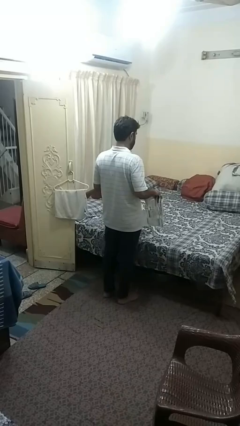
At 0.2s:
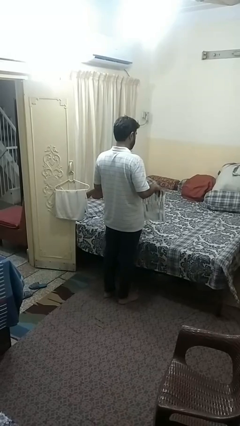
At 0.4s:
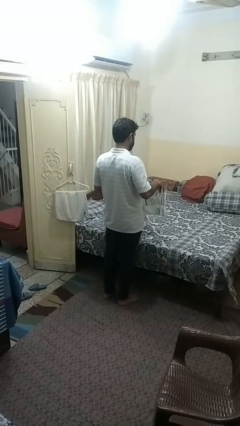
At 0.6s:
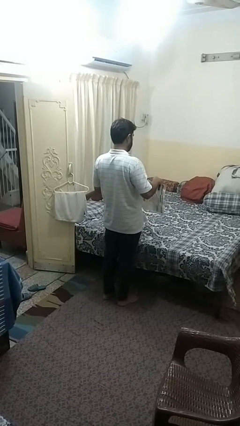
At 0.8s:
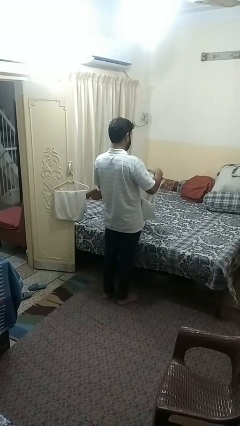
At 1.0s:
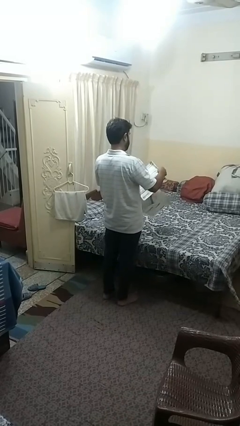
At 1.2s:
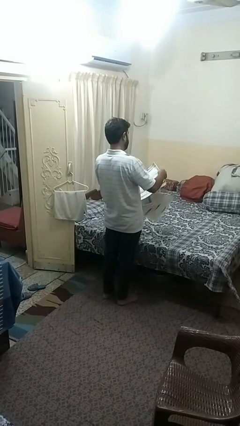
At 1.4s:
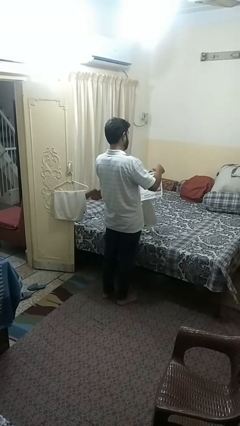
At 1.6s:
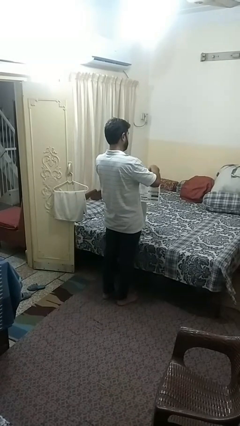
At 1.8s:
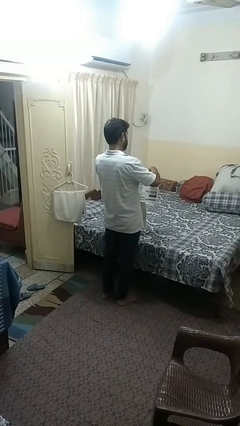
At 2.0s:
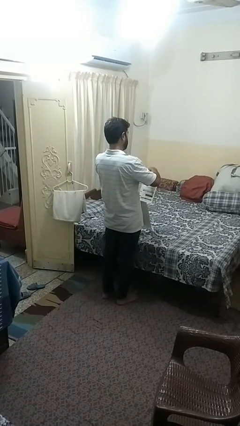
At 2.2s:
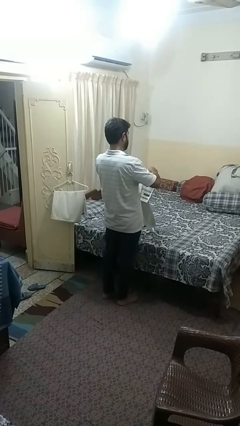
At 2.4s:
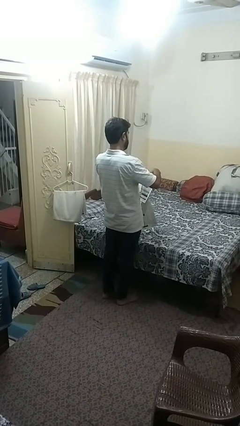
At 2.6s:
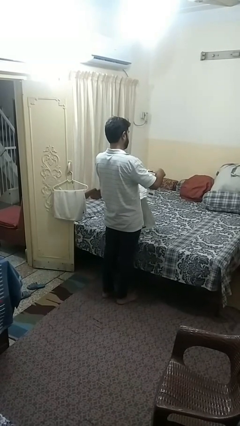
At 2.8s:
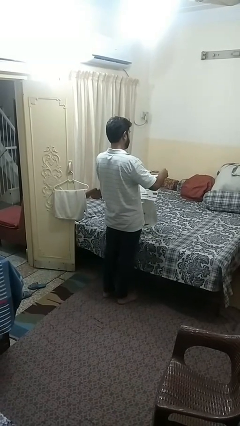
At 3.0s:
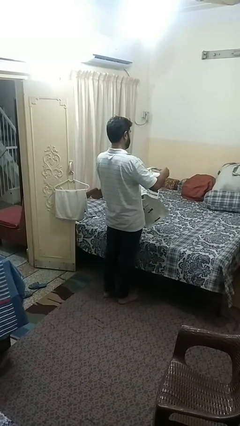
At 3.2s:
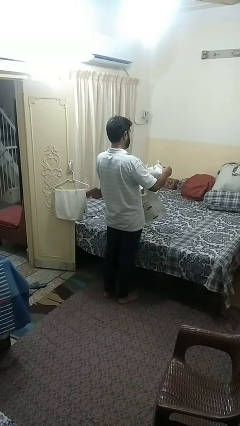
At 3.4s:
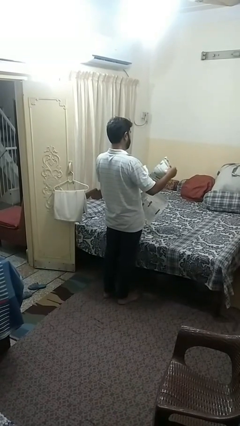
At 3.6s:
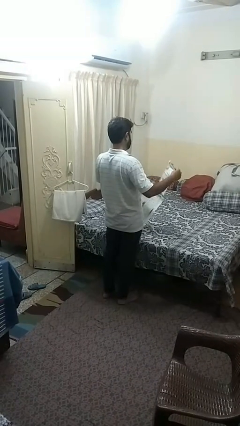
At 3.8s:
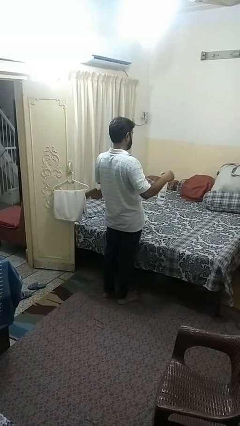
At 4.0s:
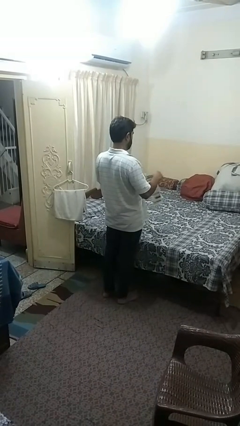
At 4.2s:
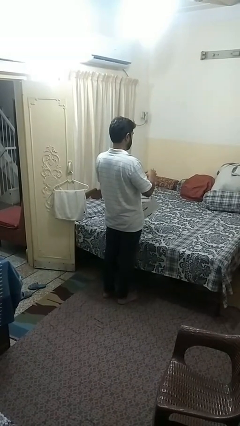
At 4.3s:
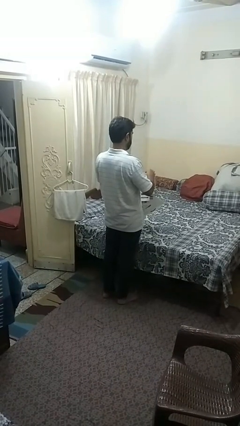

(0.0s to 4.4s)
person tears paper

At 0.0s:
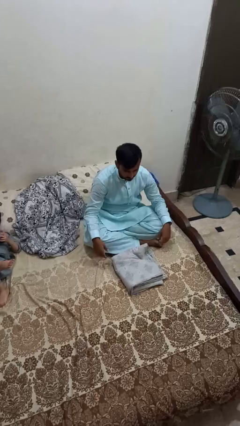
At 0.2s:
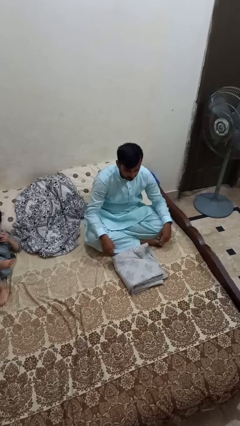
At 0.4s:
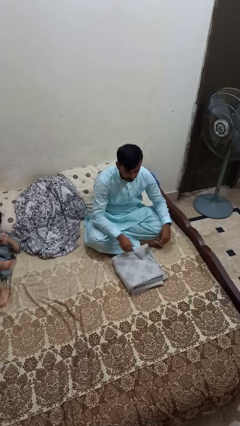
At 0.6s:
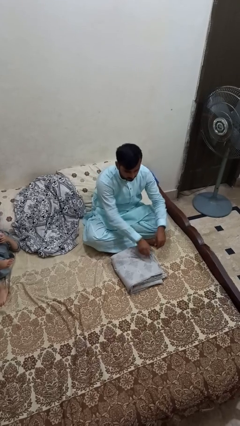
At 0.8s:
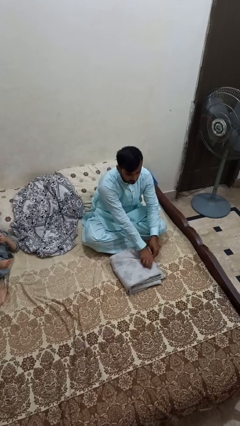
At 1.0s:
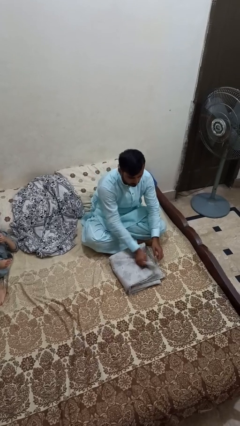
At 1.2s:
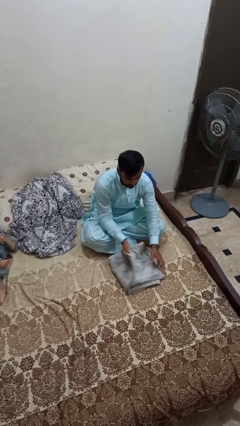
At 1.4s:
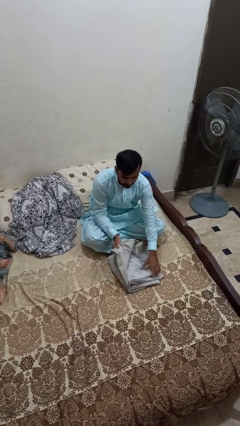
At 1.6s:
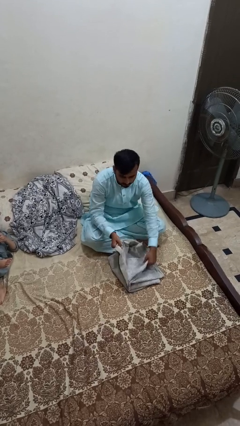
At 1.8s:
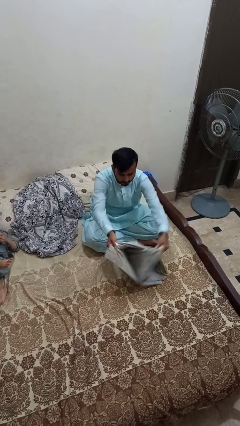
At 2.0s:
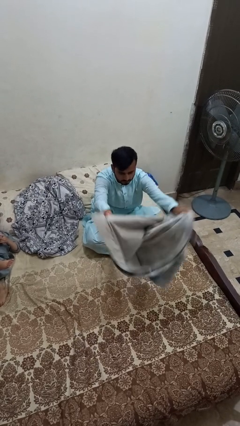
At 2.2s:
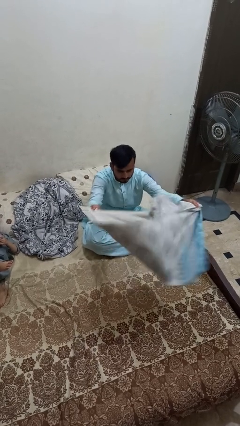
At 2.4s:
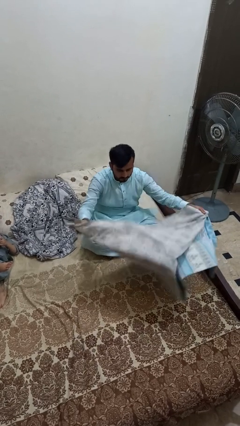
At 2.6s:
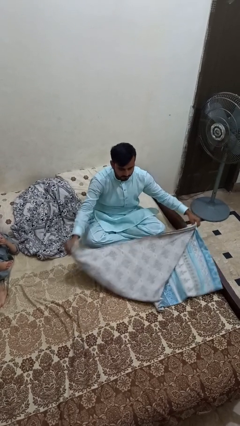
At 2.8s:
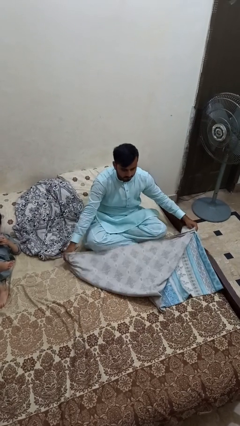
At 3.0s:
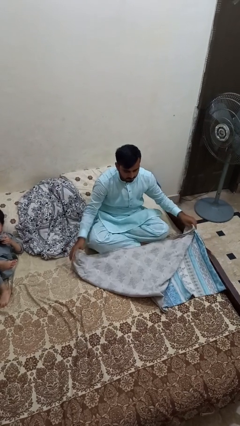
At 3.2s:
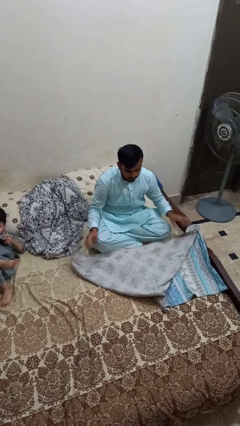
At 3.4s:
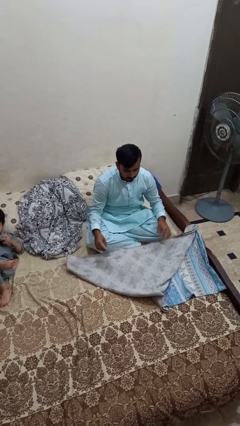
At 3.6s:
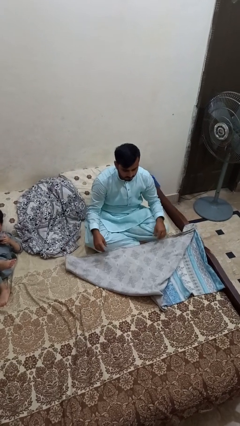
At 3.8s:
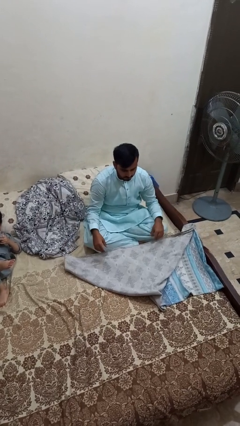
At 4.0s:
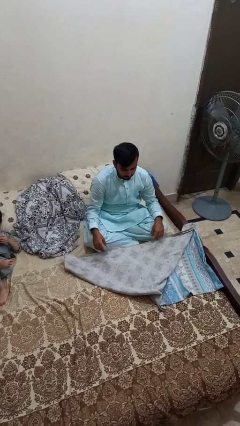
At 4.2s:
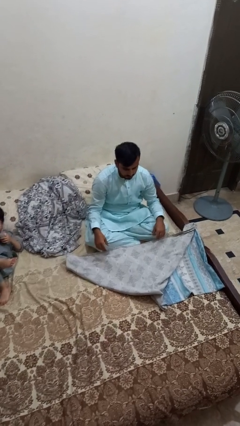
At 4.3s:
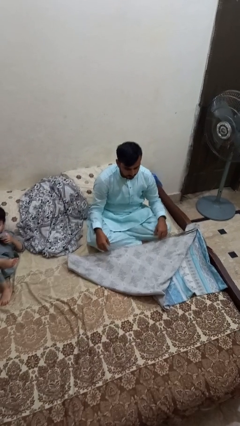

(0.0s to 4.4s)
person unfolds blanket

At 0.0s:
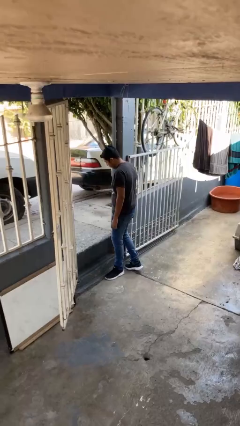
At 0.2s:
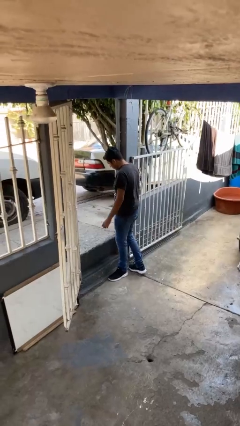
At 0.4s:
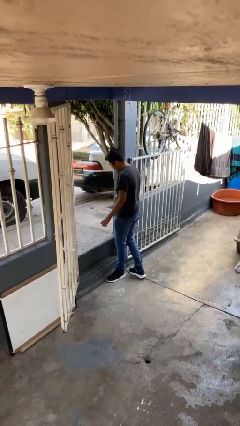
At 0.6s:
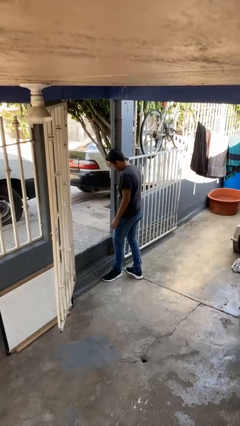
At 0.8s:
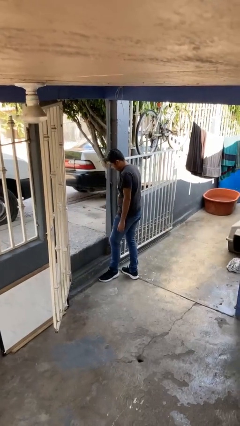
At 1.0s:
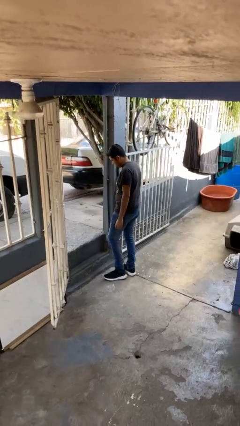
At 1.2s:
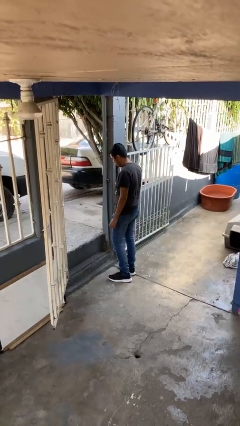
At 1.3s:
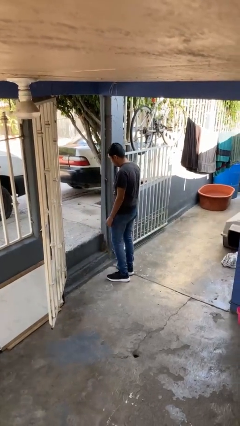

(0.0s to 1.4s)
person bumps into wall

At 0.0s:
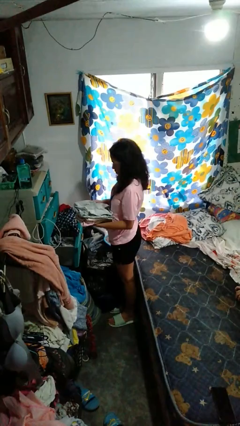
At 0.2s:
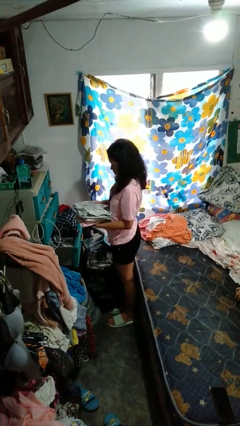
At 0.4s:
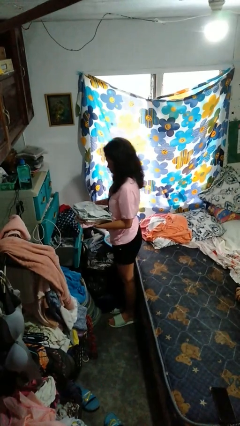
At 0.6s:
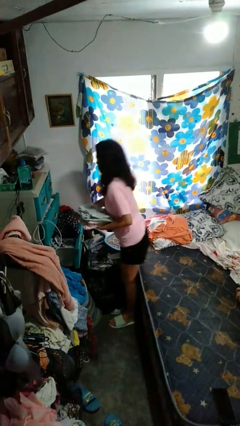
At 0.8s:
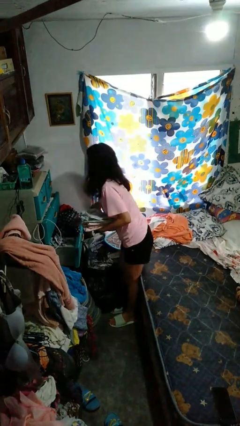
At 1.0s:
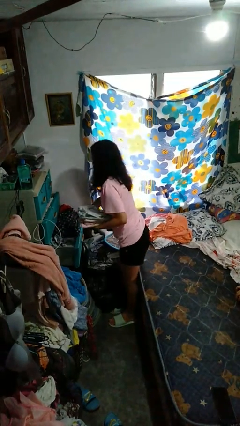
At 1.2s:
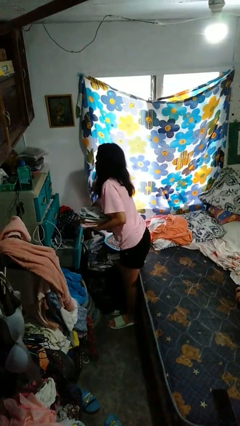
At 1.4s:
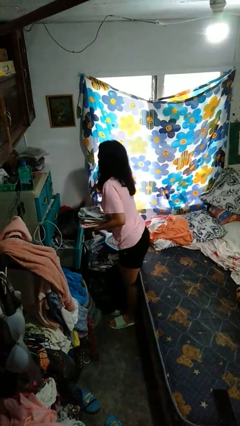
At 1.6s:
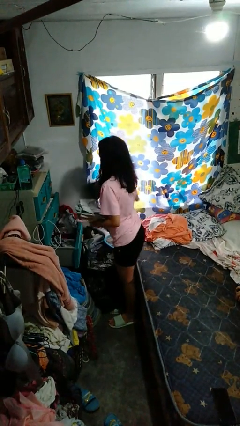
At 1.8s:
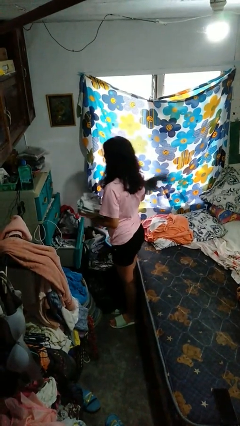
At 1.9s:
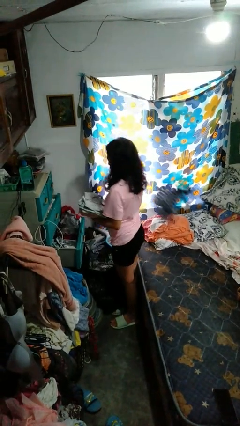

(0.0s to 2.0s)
person takes clothes from dresser

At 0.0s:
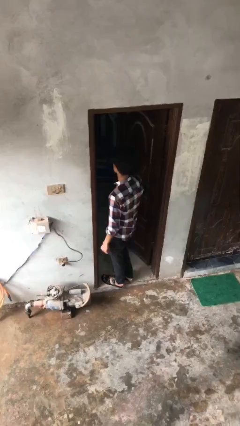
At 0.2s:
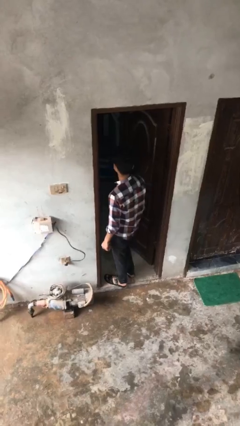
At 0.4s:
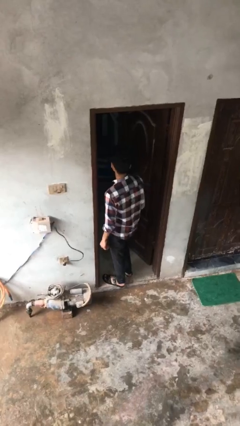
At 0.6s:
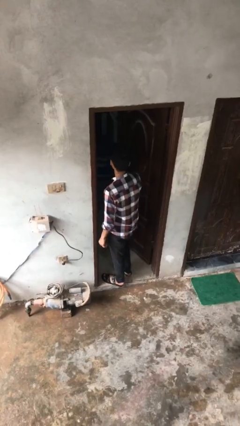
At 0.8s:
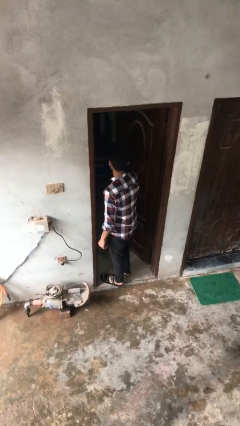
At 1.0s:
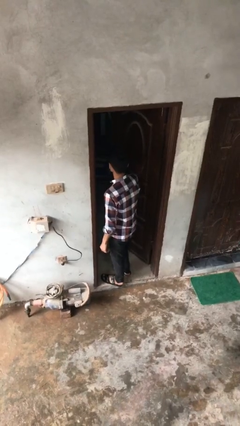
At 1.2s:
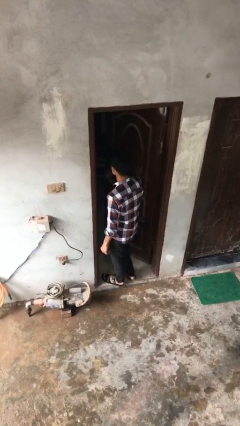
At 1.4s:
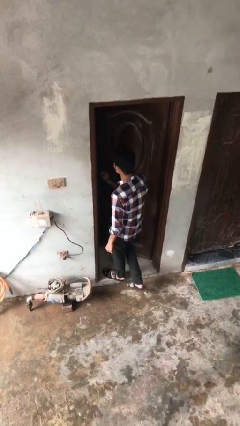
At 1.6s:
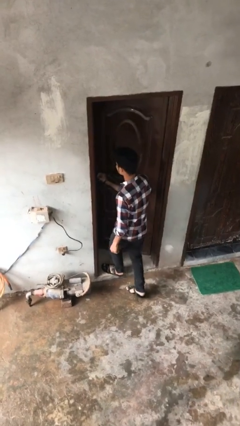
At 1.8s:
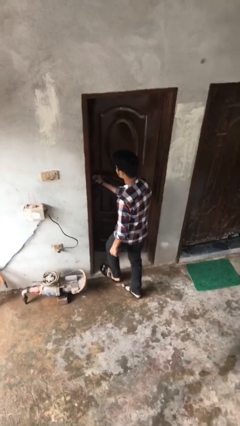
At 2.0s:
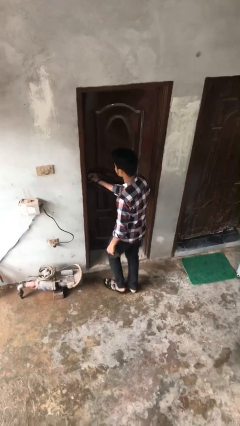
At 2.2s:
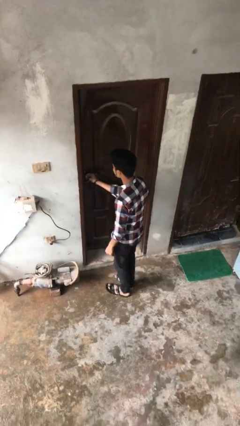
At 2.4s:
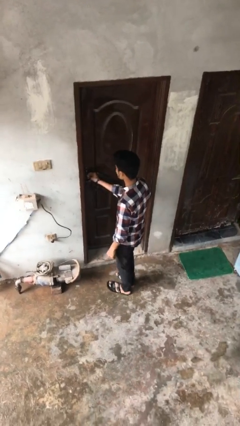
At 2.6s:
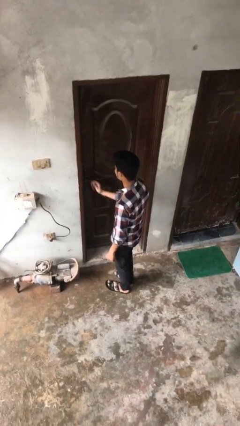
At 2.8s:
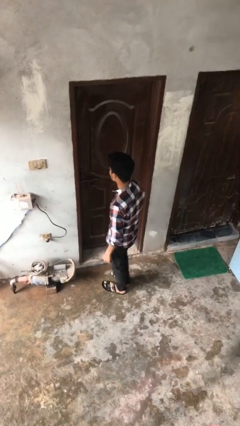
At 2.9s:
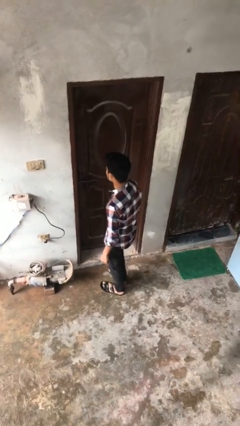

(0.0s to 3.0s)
person closes facility door

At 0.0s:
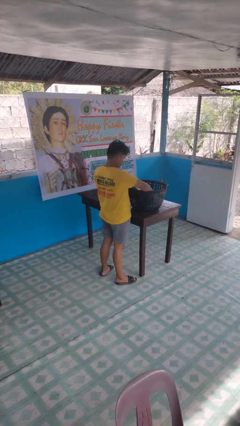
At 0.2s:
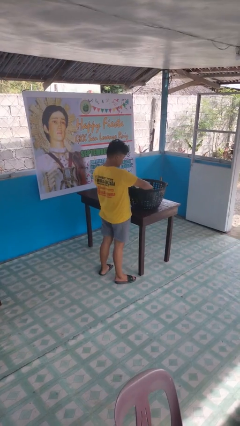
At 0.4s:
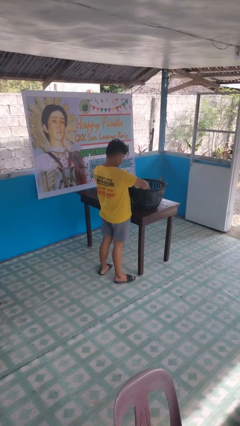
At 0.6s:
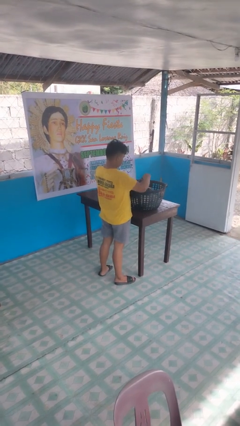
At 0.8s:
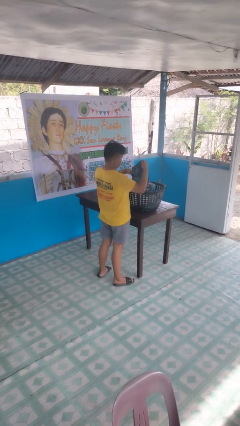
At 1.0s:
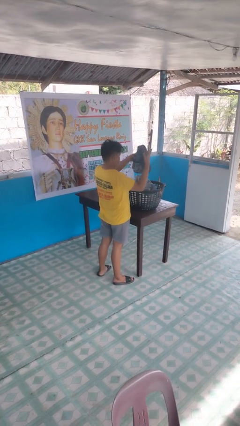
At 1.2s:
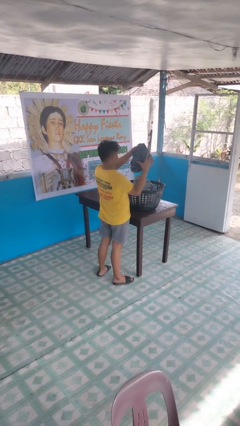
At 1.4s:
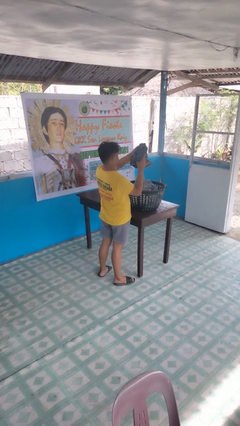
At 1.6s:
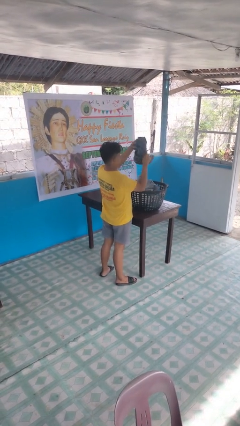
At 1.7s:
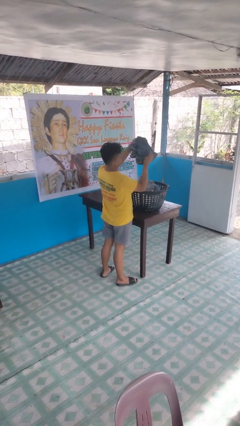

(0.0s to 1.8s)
person takes object from basket

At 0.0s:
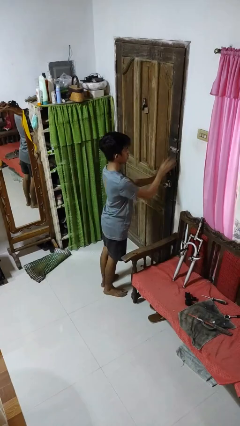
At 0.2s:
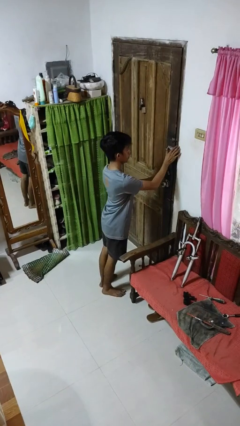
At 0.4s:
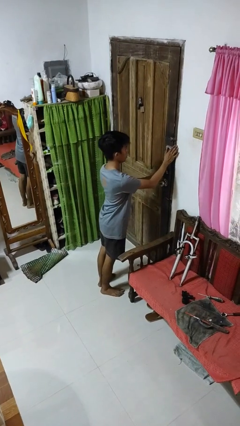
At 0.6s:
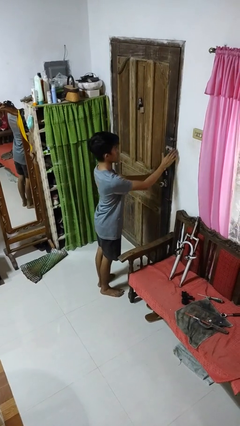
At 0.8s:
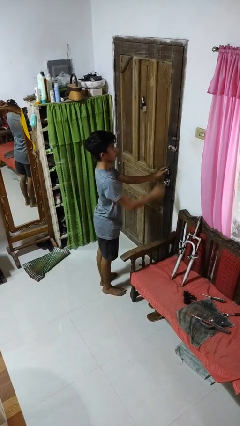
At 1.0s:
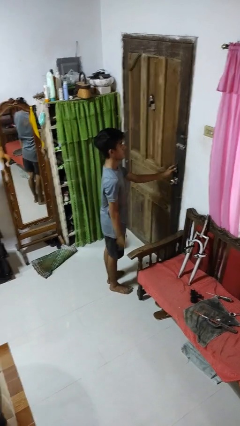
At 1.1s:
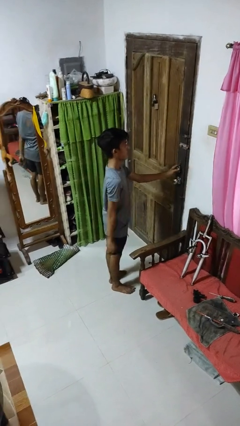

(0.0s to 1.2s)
person locks door with keys
